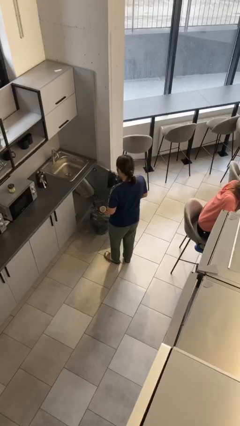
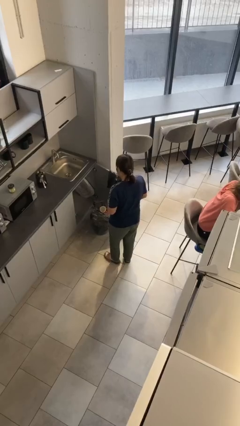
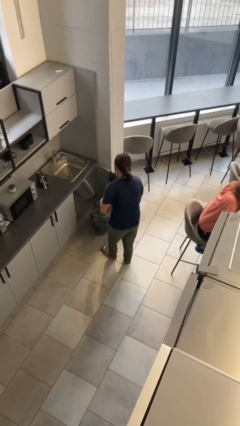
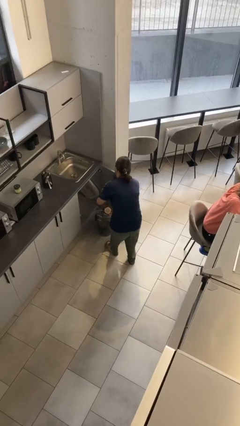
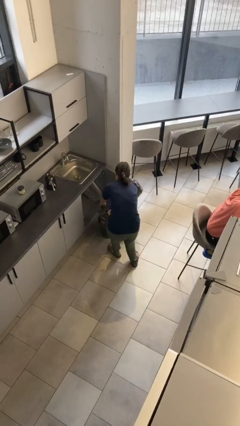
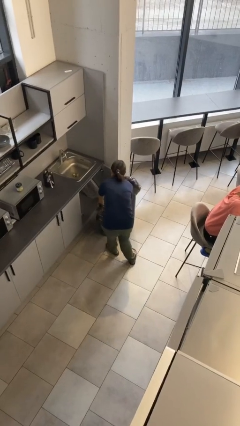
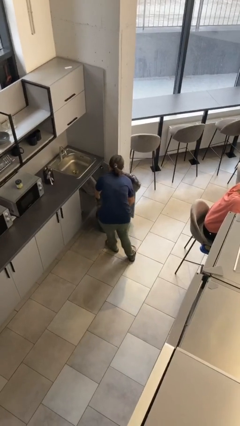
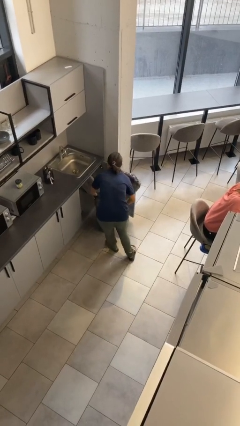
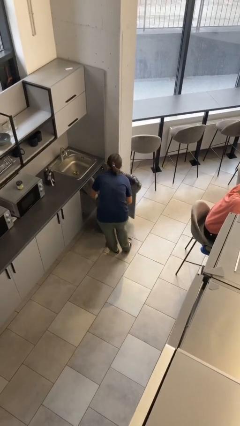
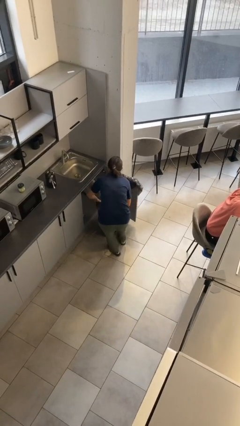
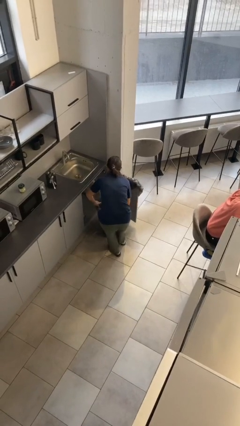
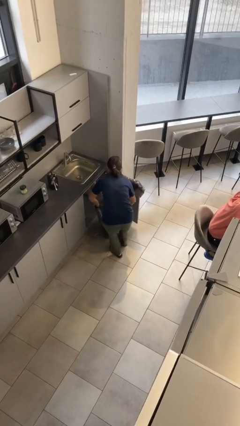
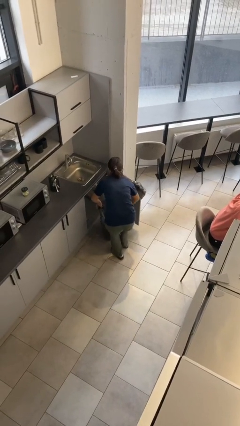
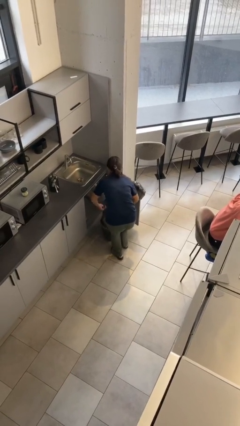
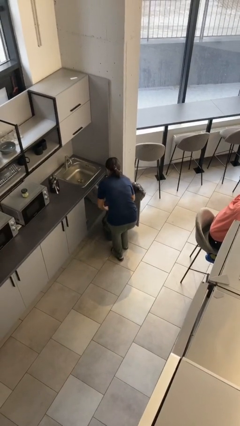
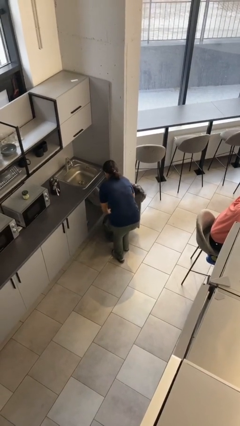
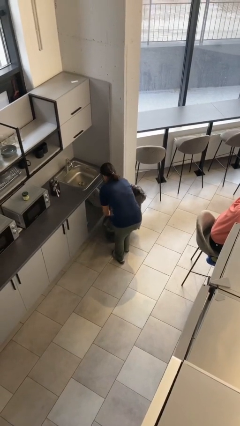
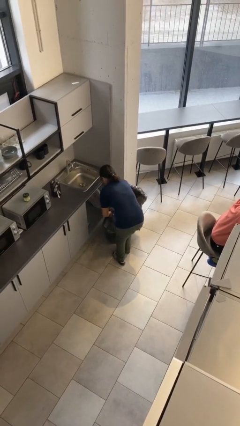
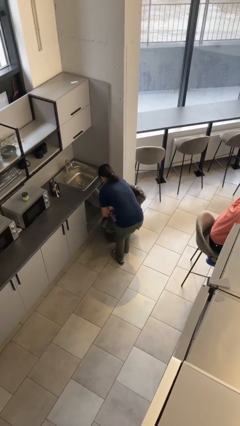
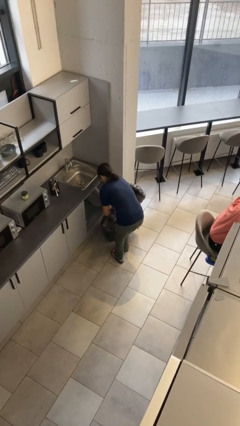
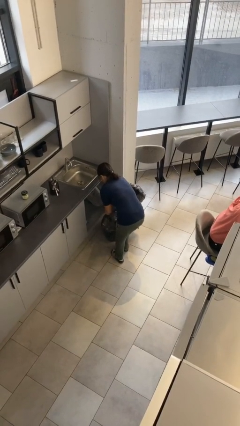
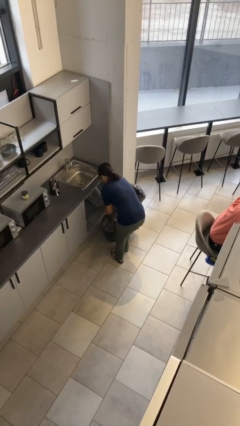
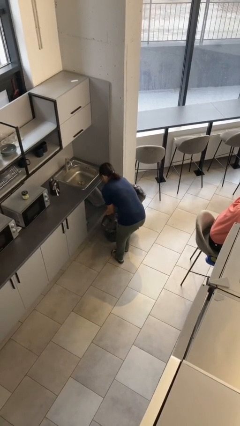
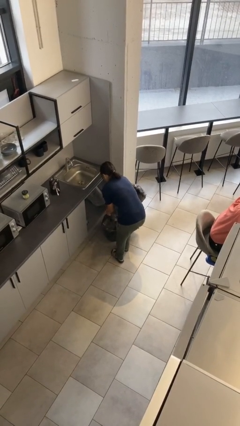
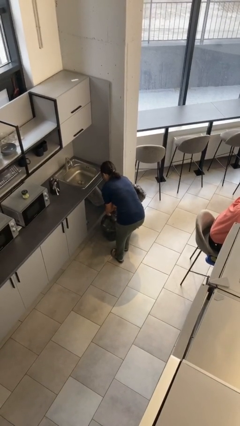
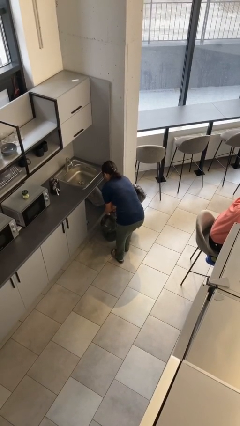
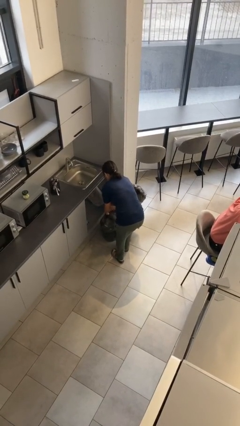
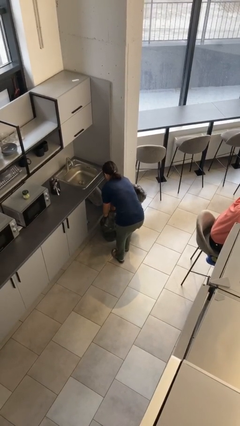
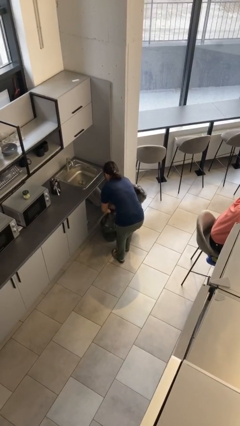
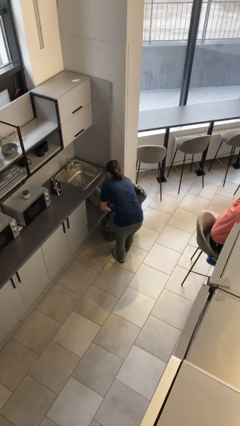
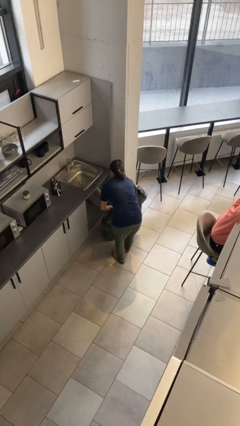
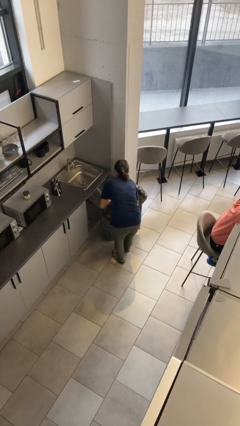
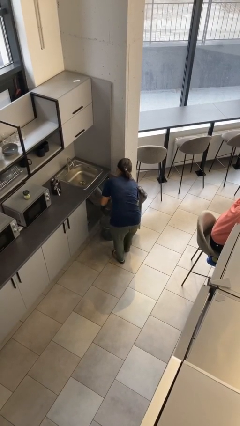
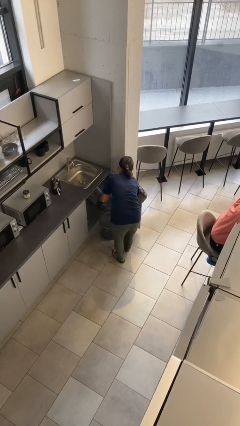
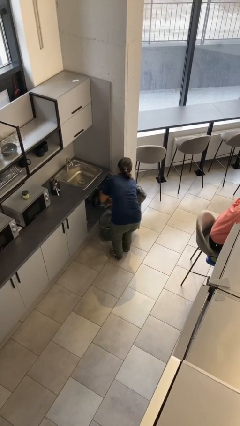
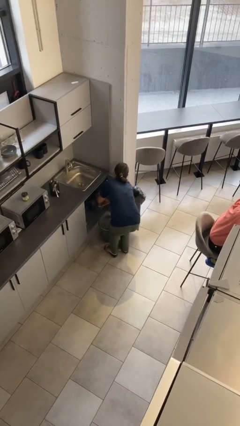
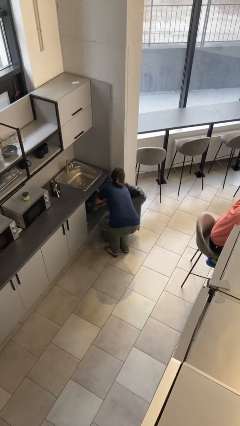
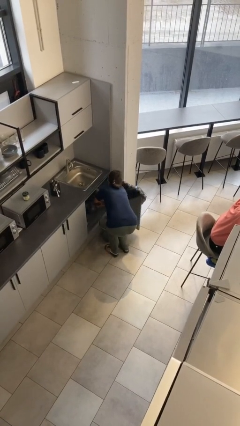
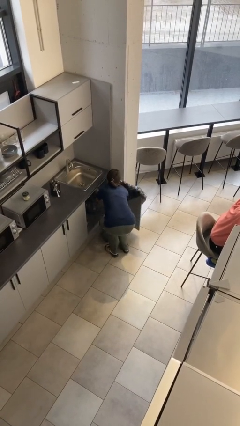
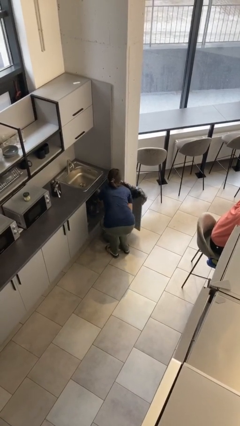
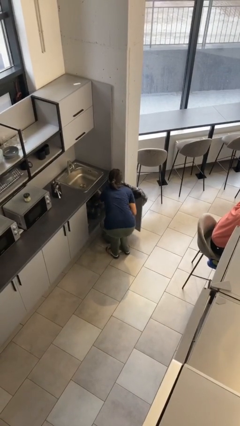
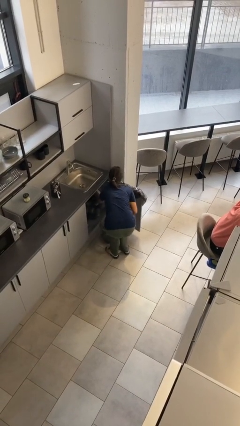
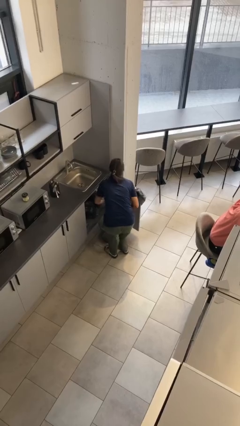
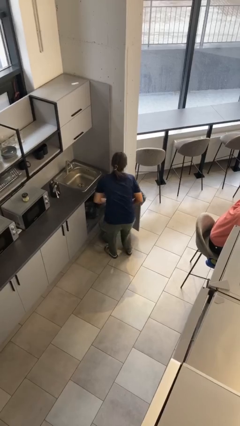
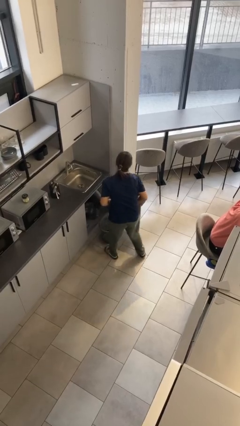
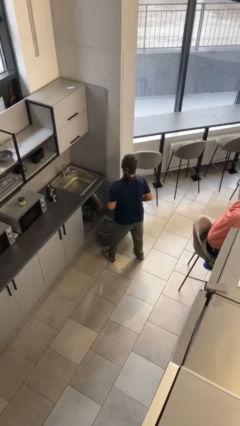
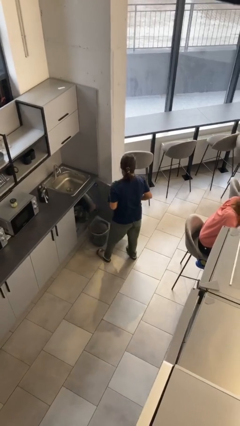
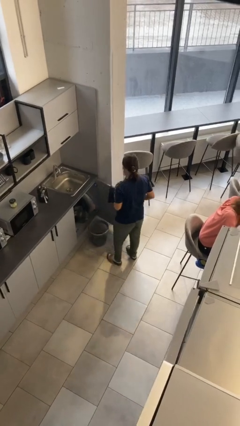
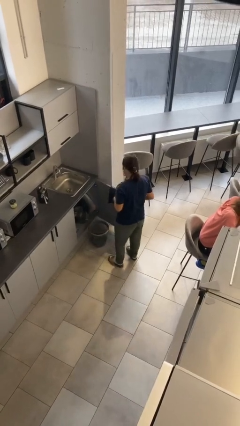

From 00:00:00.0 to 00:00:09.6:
person removes trashbag from trashcan

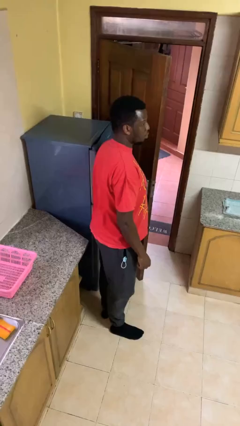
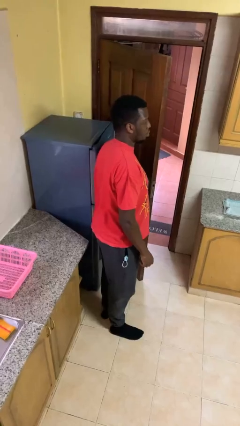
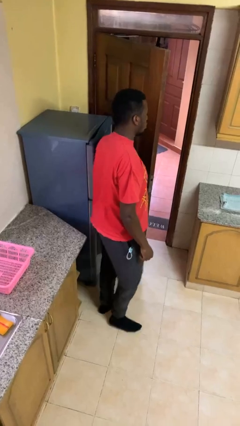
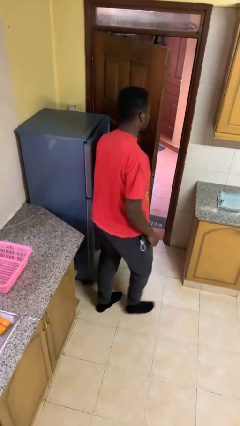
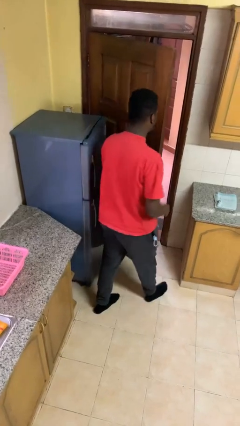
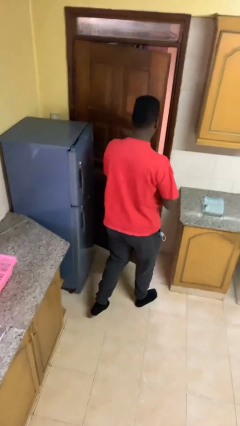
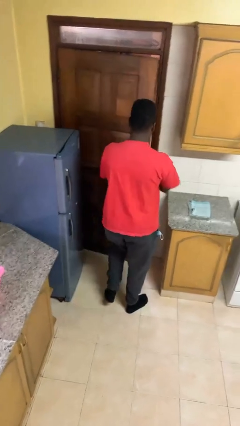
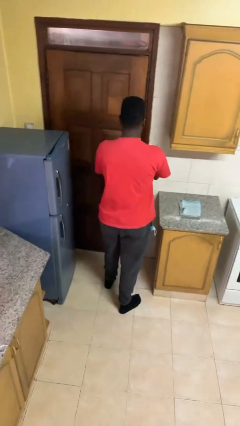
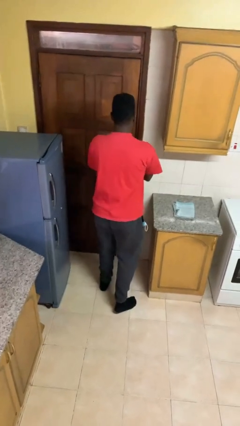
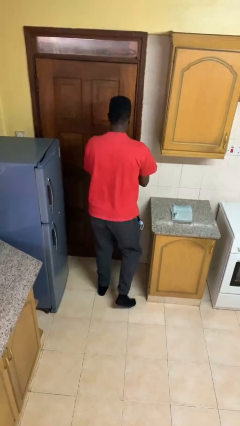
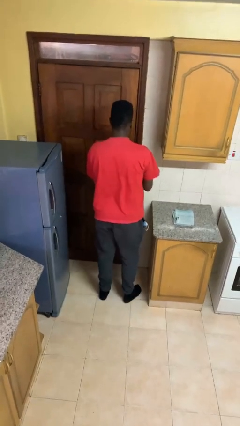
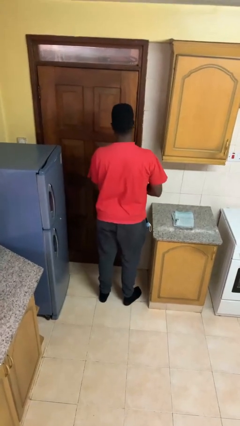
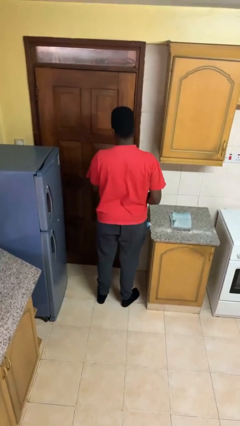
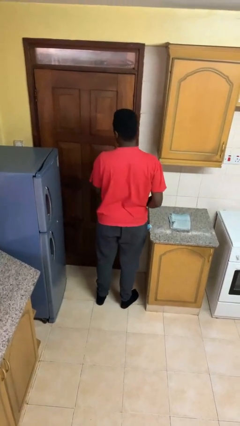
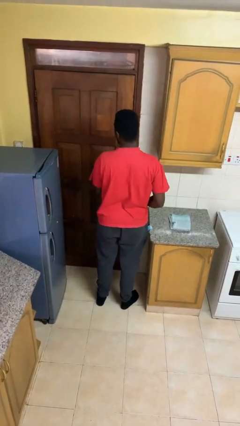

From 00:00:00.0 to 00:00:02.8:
person closes facility door

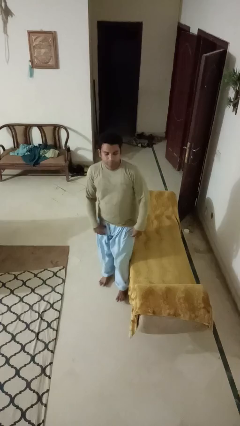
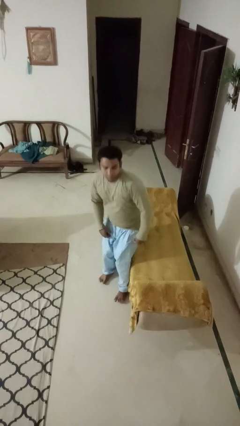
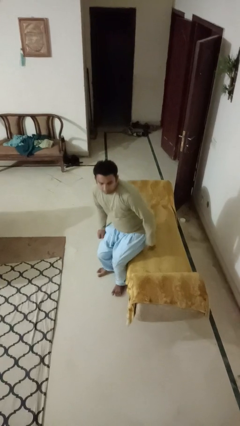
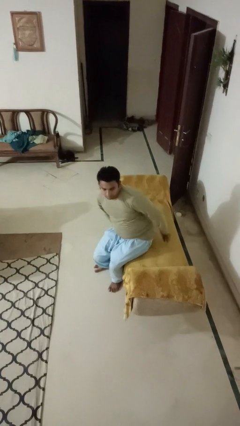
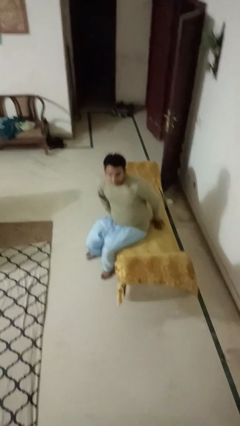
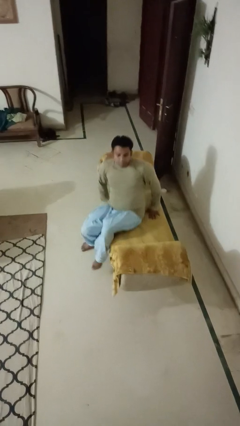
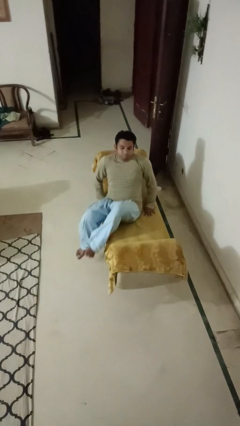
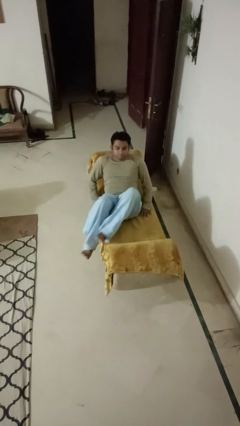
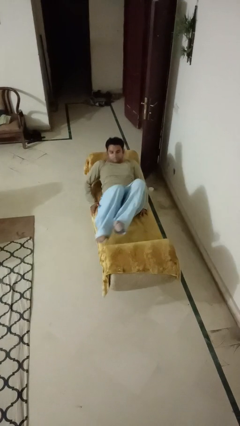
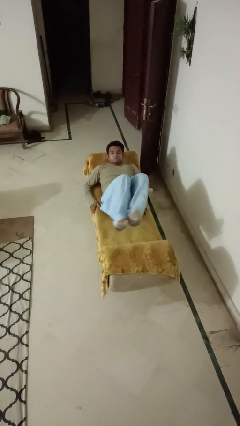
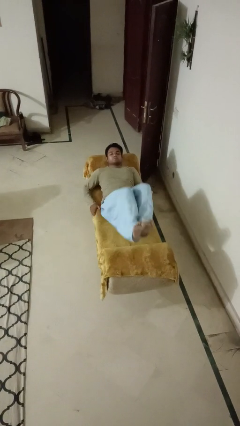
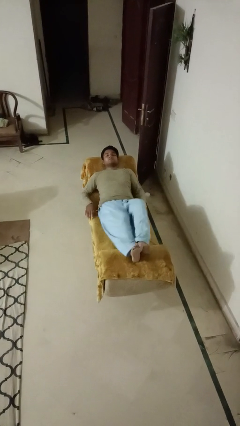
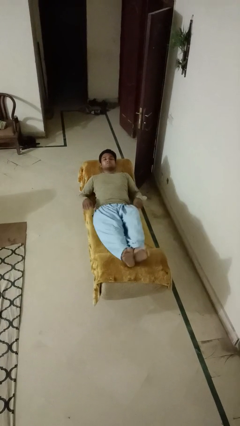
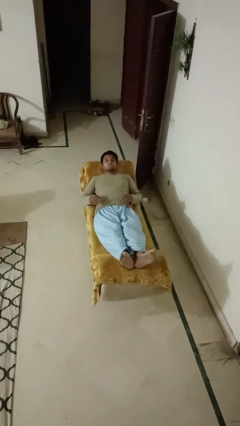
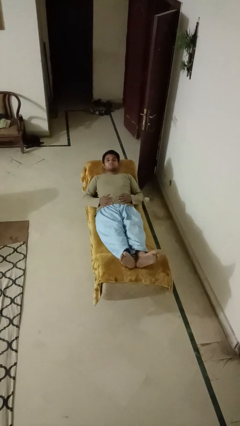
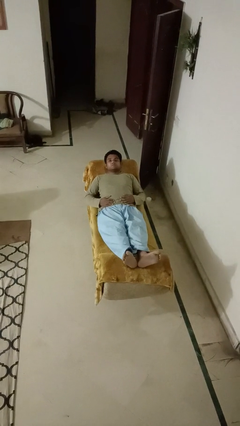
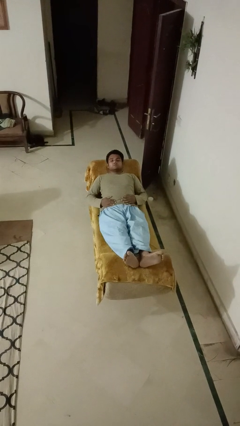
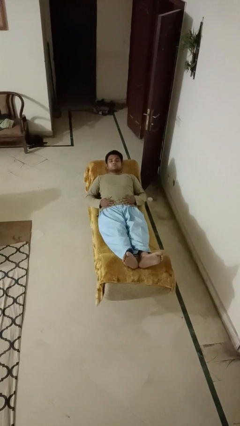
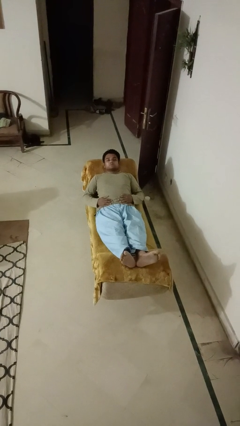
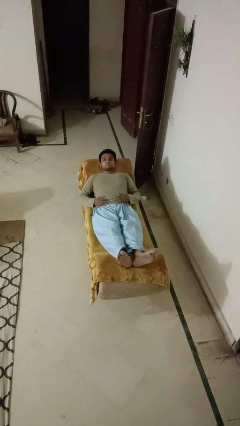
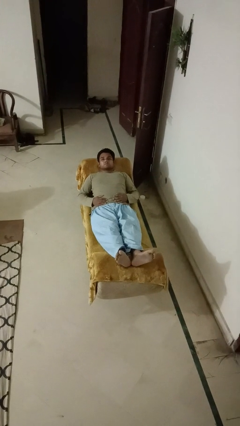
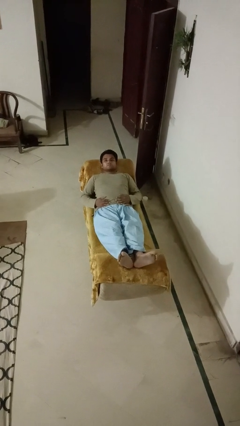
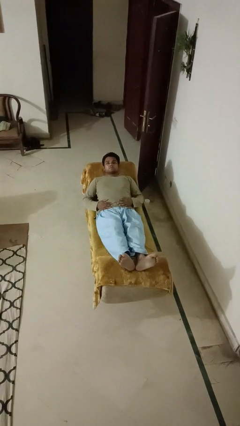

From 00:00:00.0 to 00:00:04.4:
person lies down on couch

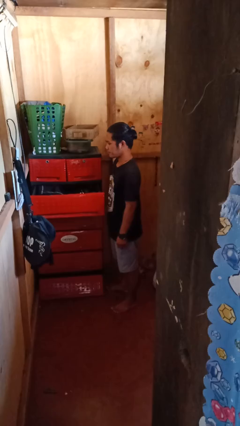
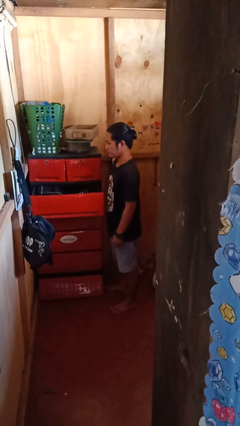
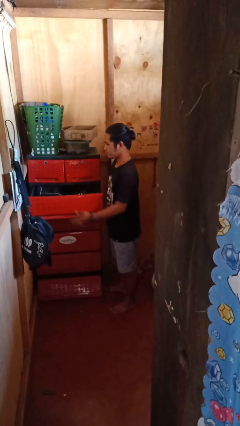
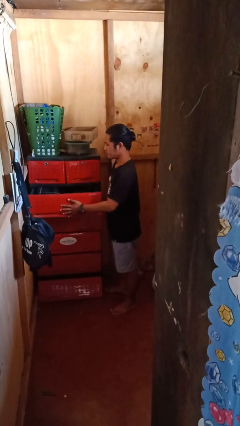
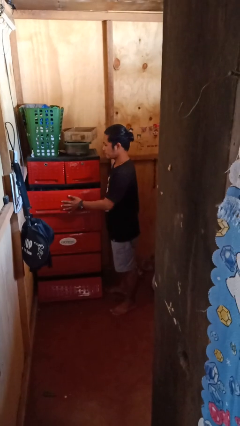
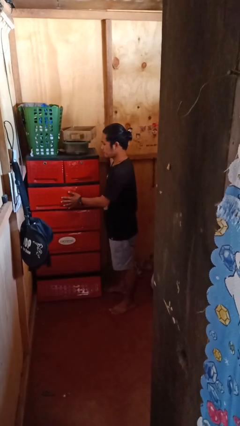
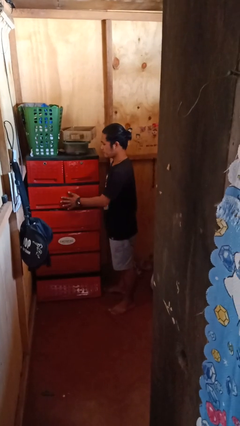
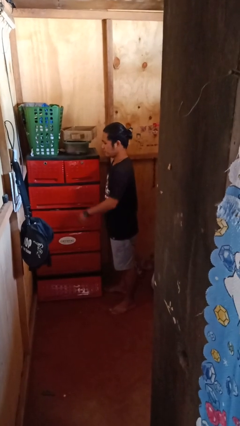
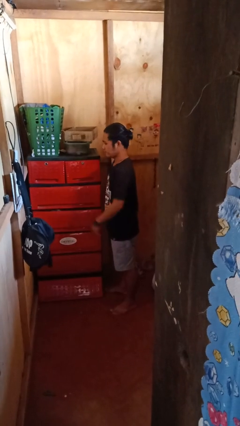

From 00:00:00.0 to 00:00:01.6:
person closes dresser drawer
